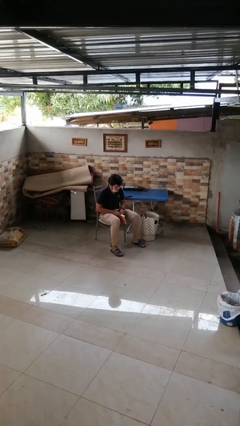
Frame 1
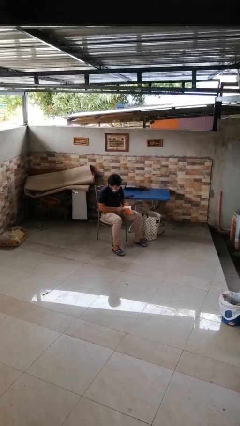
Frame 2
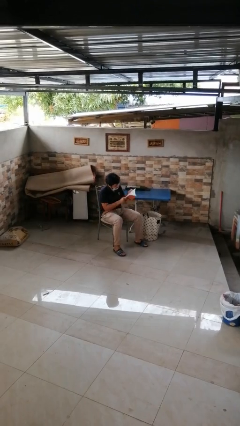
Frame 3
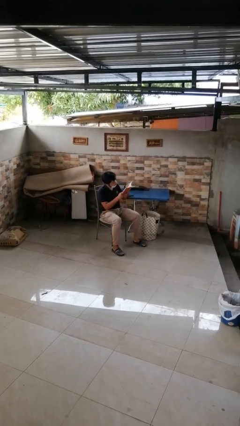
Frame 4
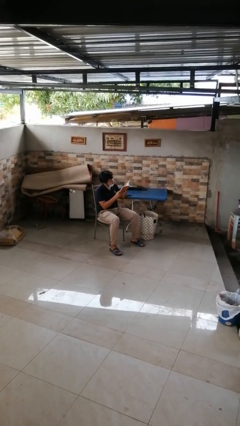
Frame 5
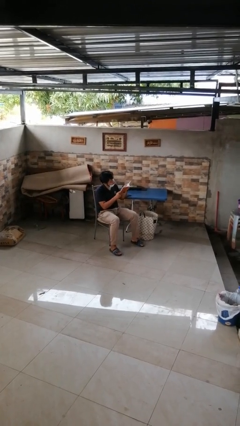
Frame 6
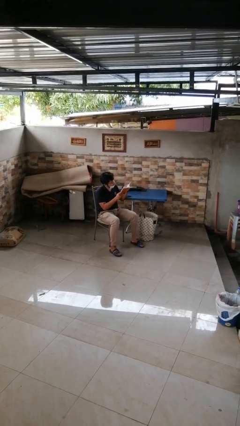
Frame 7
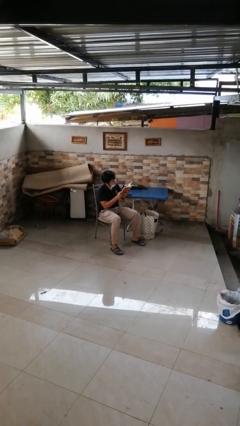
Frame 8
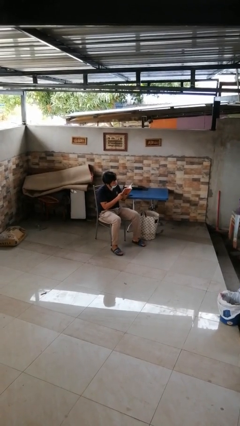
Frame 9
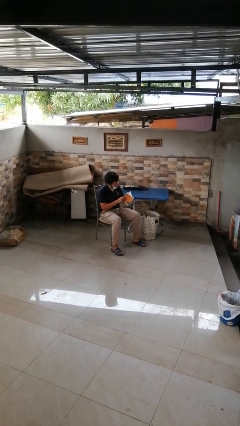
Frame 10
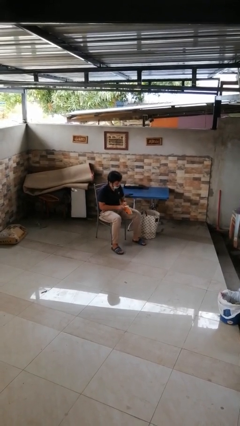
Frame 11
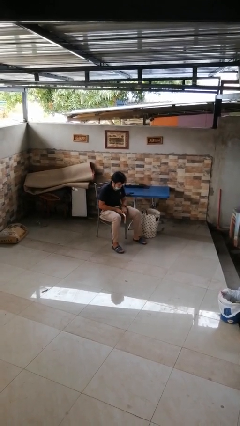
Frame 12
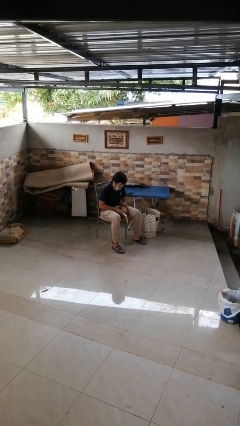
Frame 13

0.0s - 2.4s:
person reads book

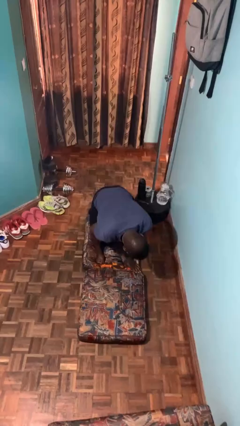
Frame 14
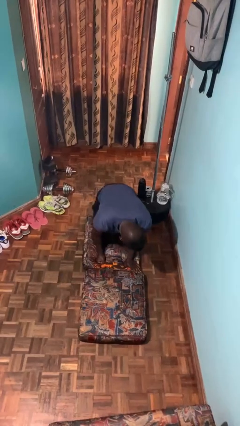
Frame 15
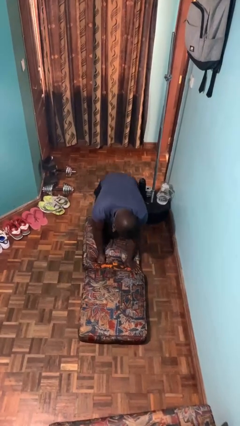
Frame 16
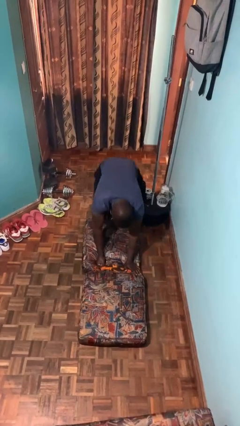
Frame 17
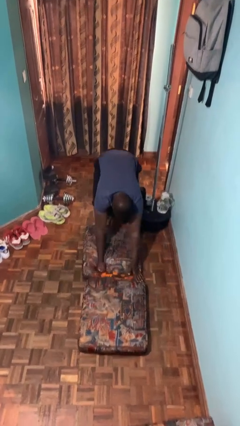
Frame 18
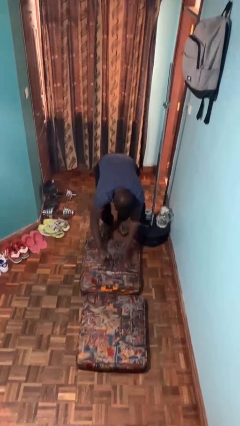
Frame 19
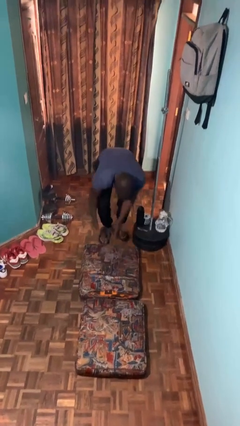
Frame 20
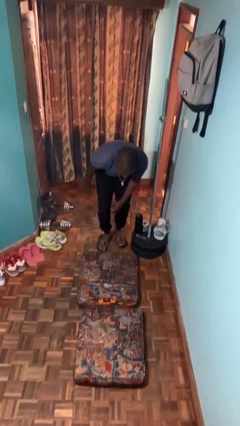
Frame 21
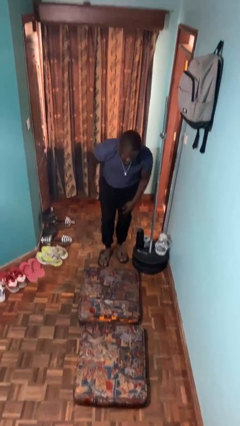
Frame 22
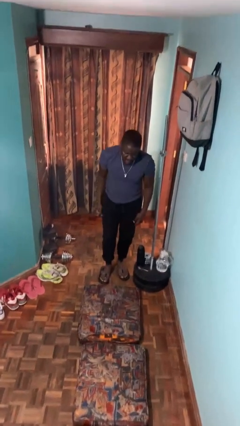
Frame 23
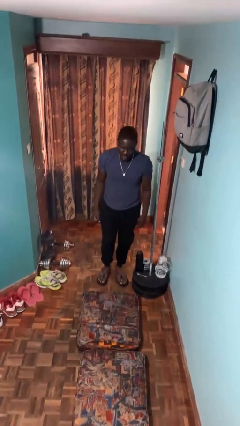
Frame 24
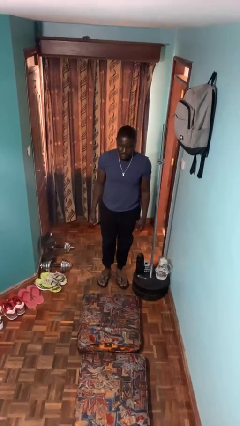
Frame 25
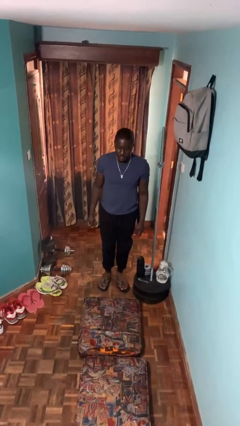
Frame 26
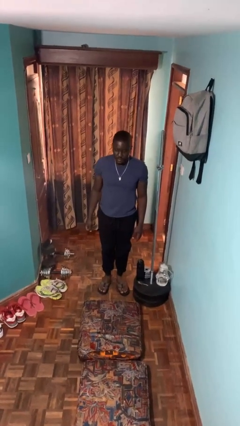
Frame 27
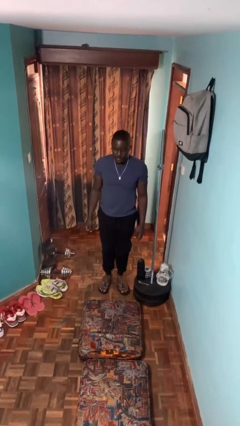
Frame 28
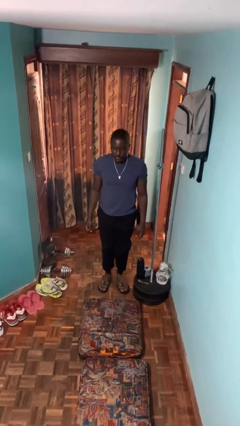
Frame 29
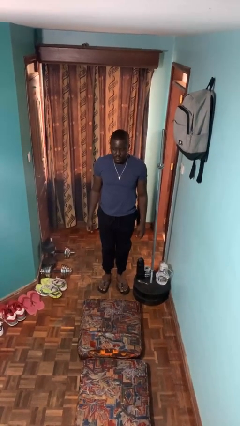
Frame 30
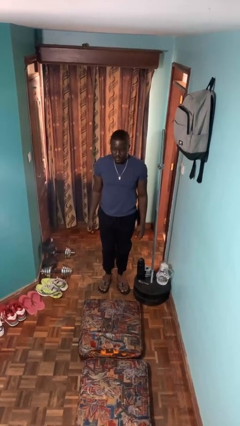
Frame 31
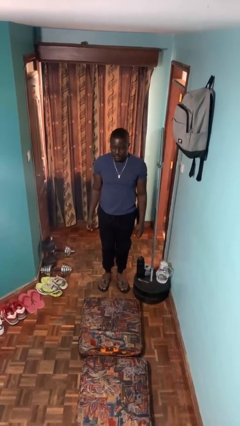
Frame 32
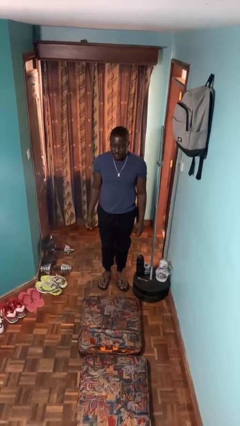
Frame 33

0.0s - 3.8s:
person stands up from floor

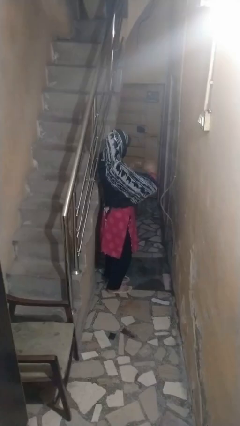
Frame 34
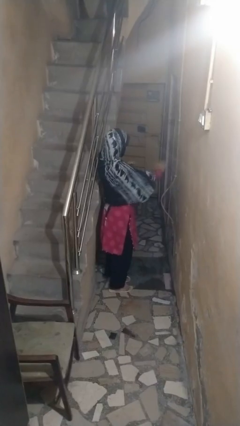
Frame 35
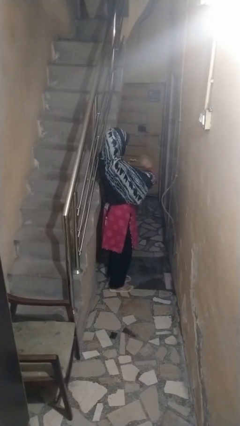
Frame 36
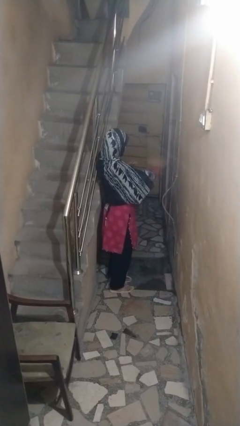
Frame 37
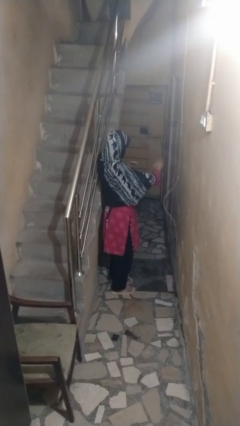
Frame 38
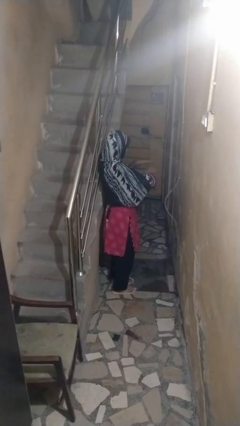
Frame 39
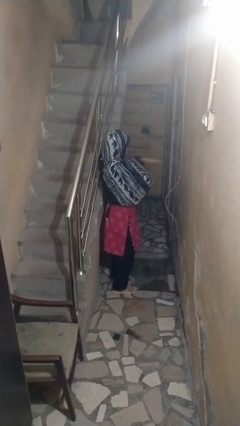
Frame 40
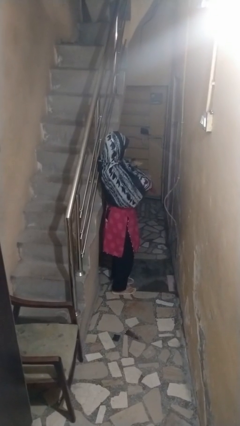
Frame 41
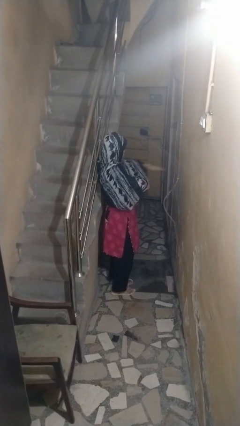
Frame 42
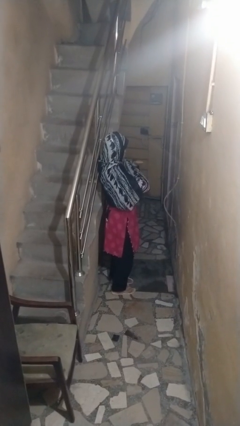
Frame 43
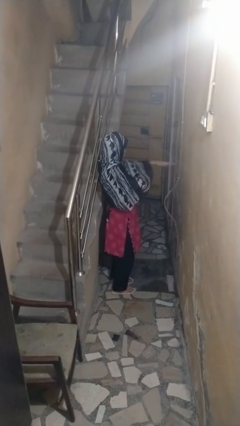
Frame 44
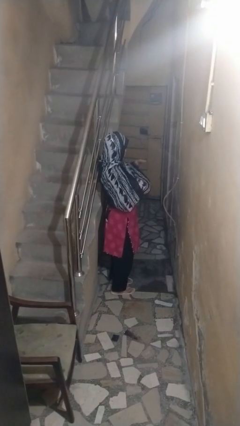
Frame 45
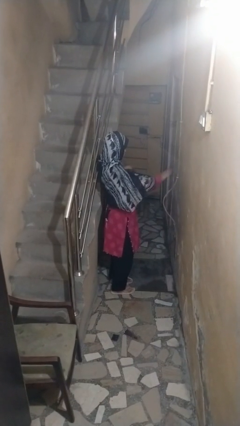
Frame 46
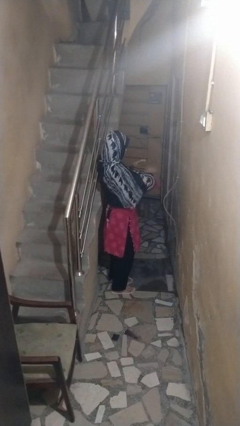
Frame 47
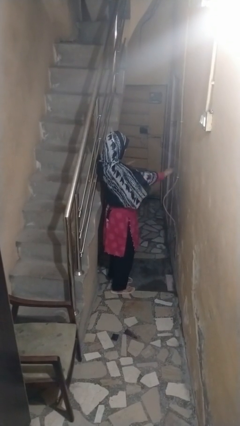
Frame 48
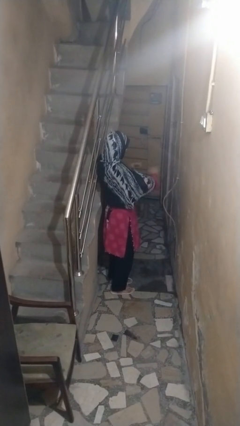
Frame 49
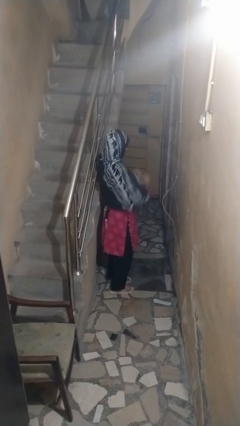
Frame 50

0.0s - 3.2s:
person karate chop

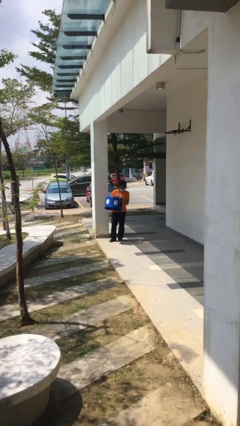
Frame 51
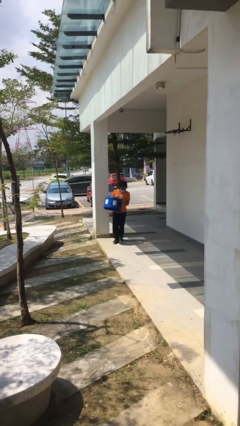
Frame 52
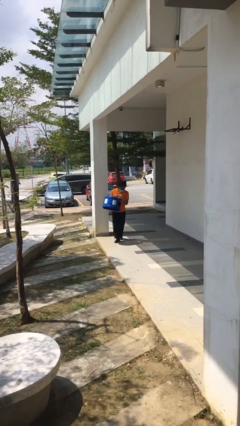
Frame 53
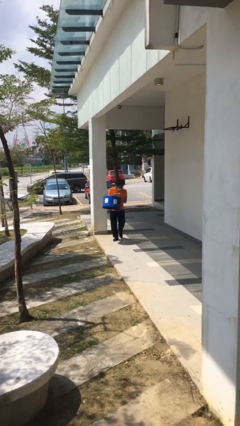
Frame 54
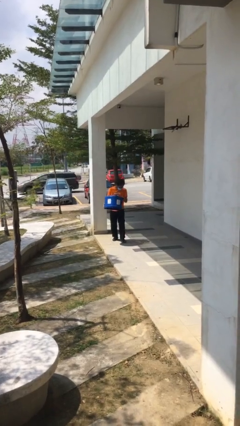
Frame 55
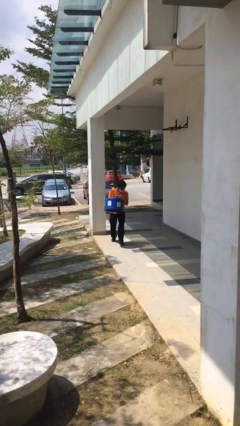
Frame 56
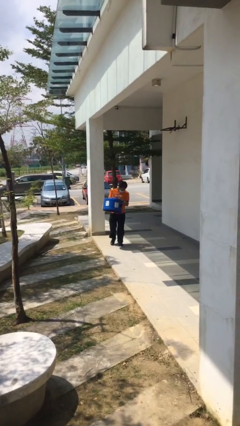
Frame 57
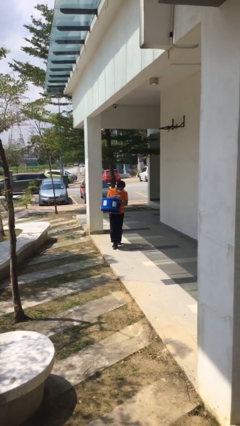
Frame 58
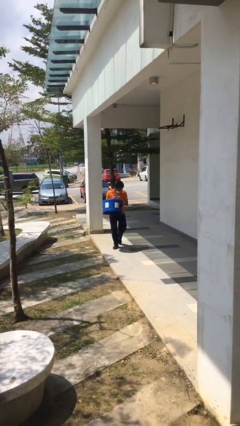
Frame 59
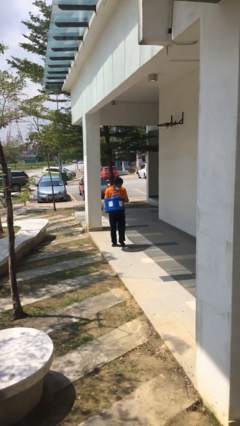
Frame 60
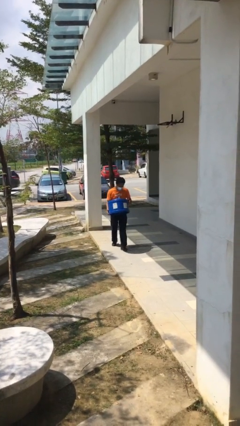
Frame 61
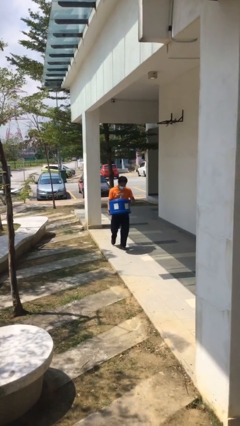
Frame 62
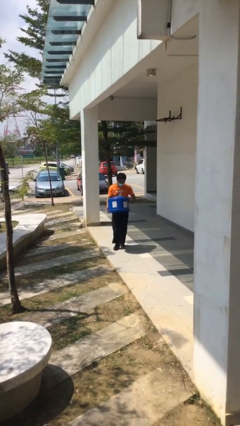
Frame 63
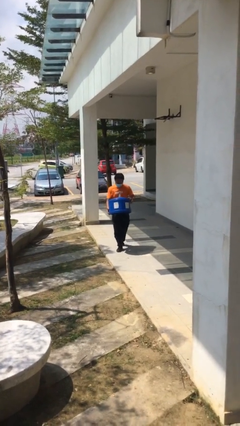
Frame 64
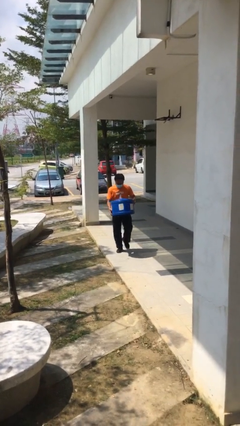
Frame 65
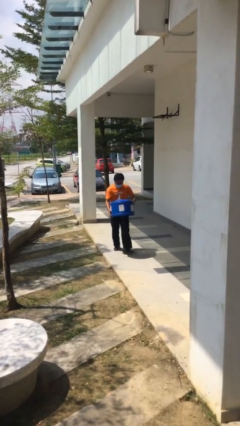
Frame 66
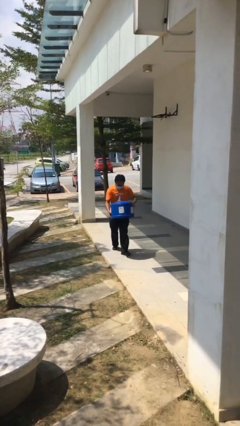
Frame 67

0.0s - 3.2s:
person carries heavy object

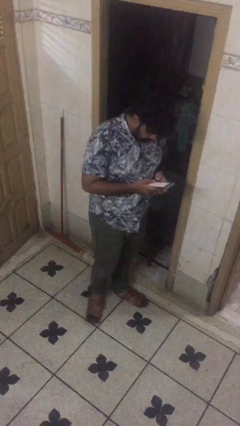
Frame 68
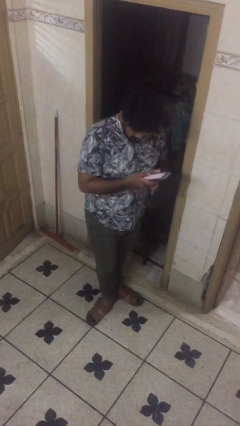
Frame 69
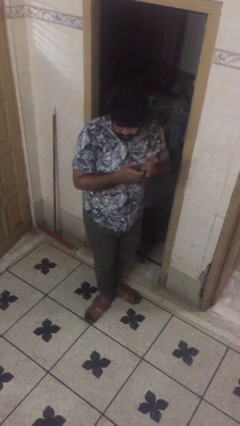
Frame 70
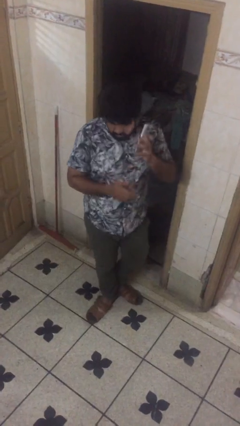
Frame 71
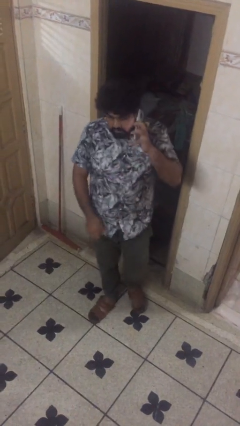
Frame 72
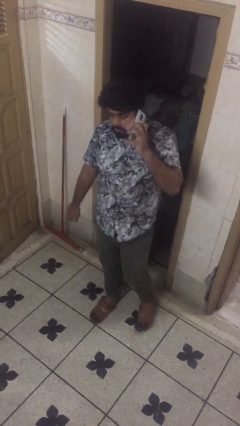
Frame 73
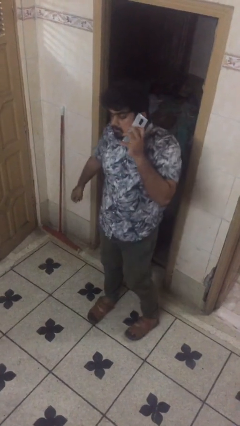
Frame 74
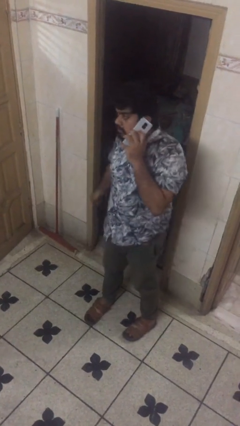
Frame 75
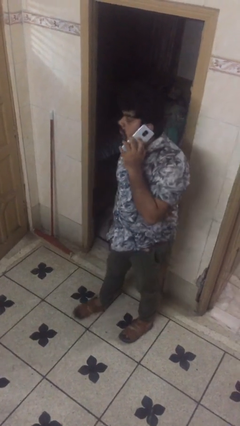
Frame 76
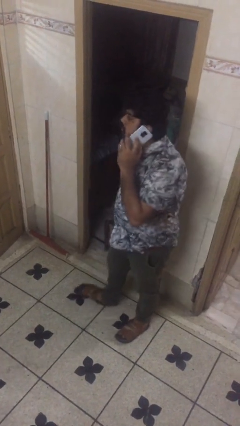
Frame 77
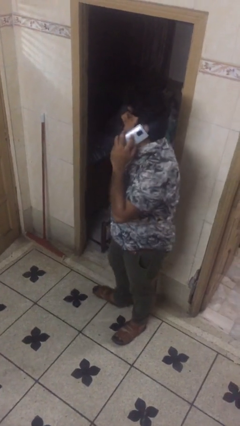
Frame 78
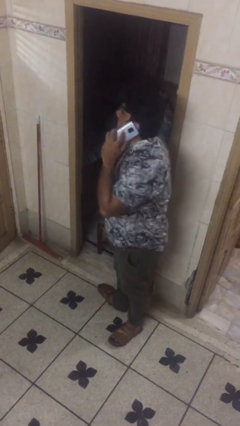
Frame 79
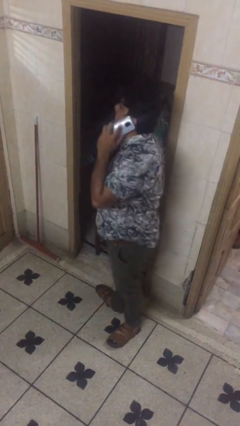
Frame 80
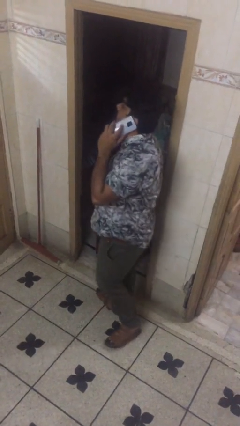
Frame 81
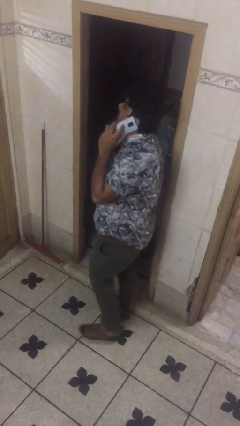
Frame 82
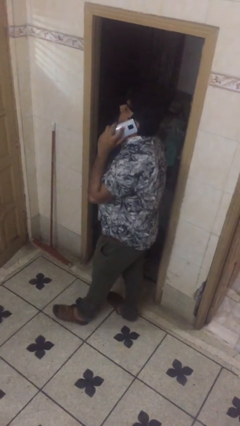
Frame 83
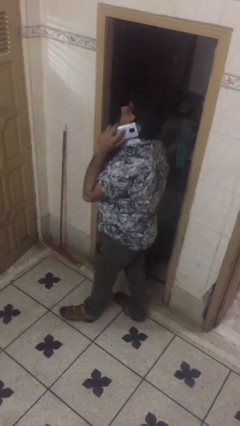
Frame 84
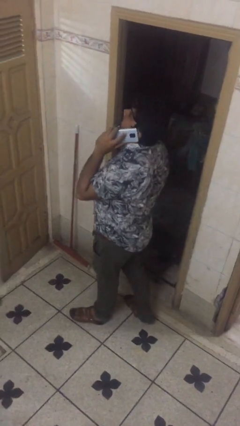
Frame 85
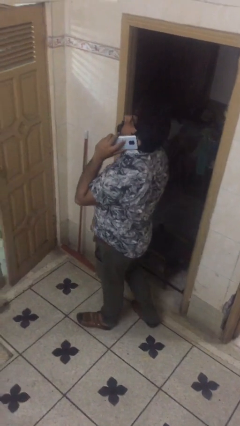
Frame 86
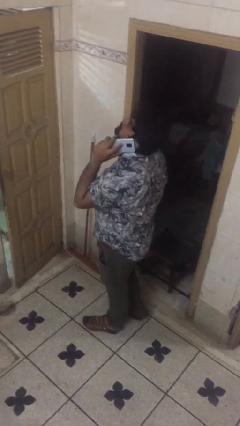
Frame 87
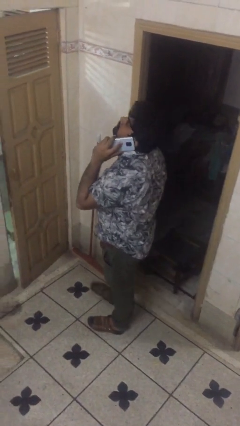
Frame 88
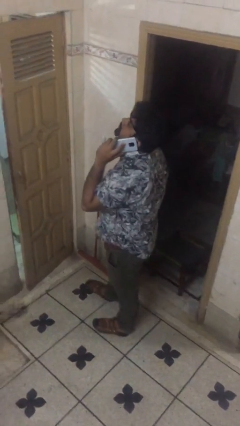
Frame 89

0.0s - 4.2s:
person talks on phone

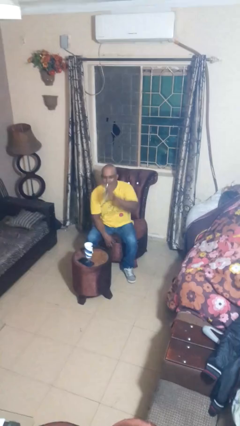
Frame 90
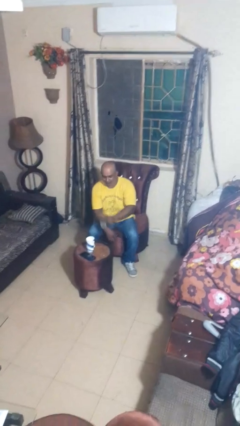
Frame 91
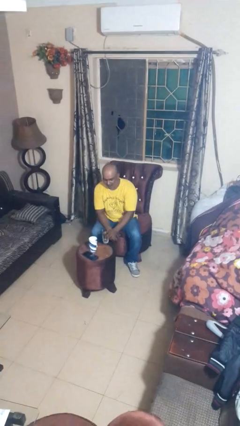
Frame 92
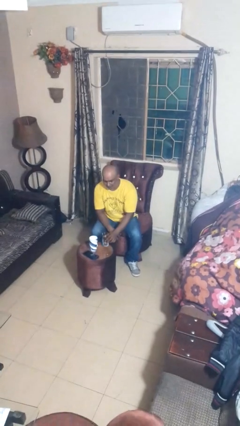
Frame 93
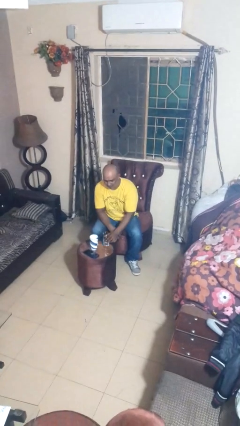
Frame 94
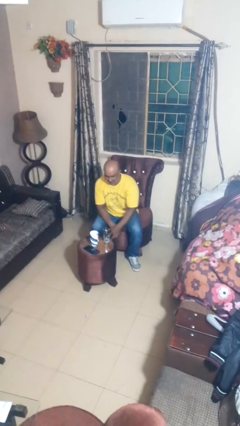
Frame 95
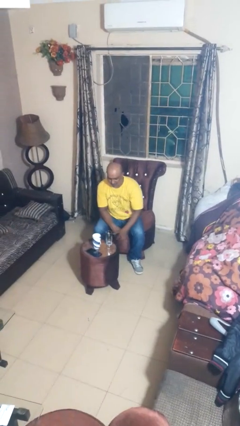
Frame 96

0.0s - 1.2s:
person puts down object on table
